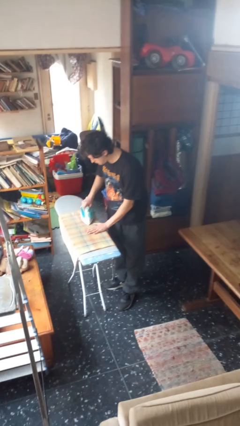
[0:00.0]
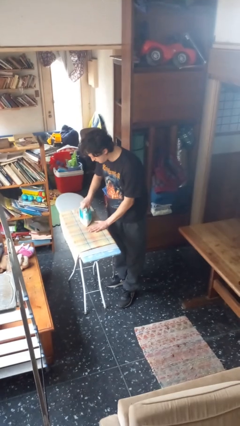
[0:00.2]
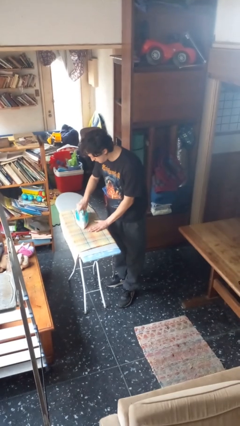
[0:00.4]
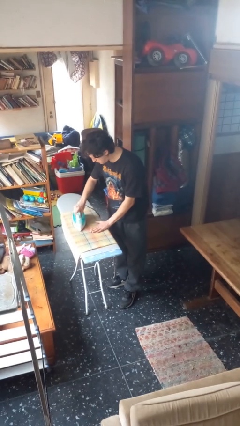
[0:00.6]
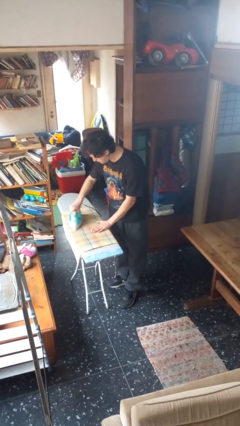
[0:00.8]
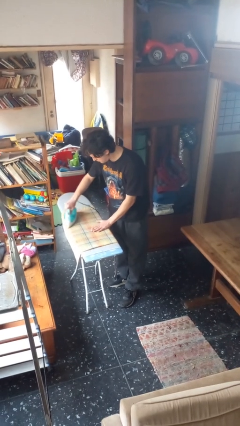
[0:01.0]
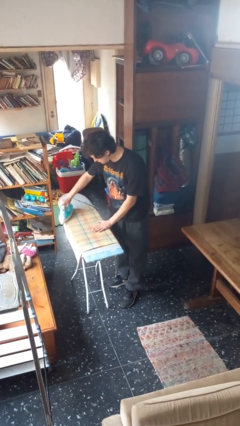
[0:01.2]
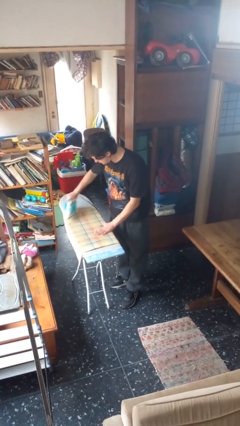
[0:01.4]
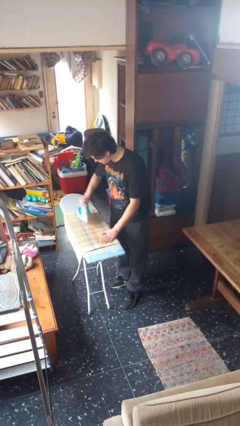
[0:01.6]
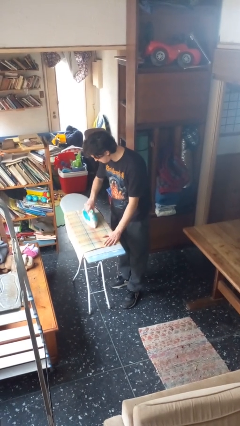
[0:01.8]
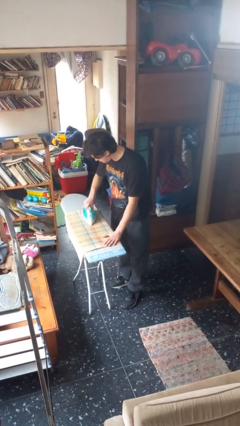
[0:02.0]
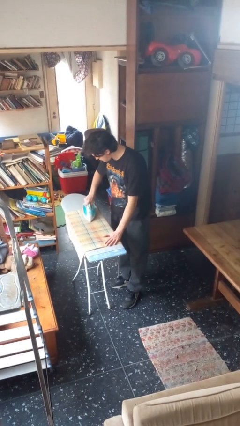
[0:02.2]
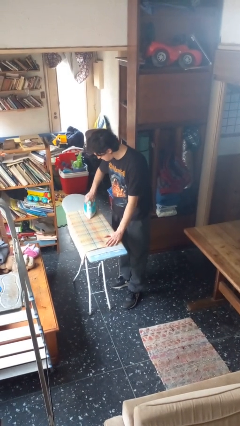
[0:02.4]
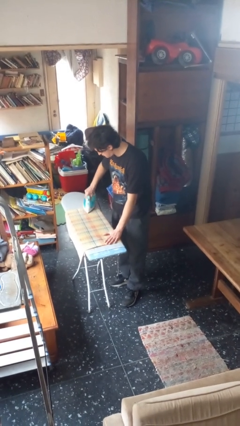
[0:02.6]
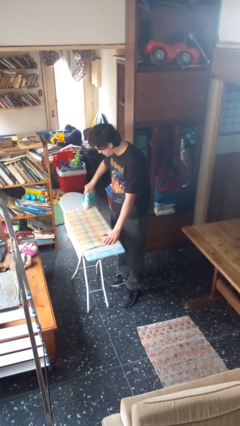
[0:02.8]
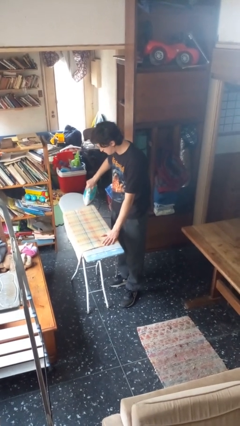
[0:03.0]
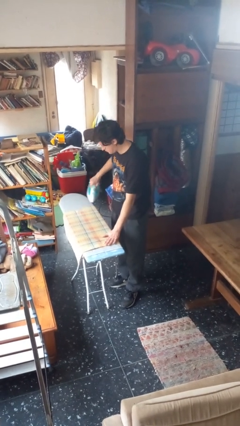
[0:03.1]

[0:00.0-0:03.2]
person irons clothes

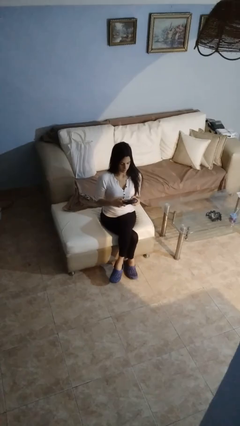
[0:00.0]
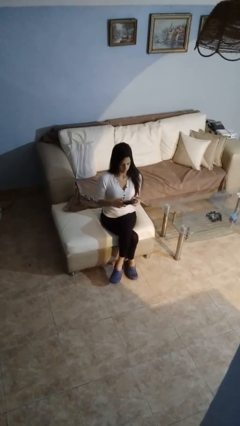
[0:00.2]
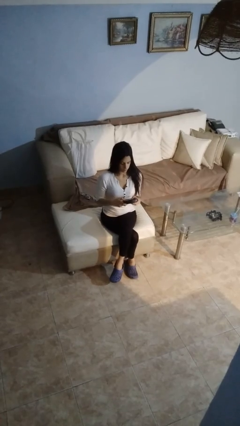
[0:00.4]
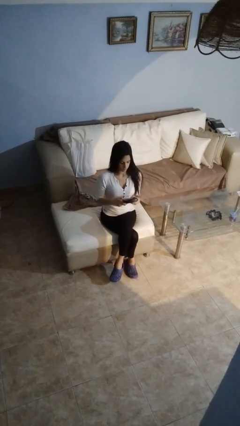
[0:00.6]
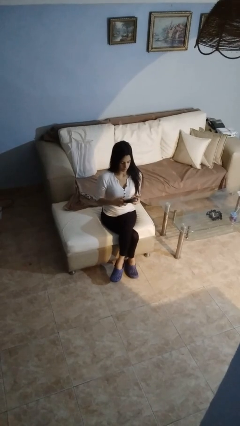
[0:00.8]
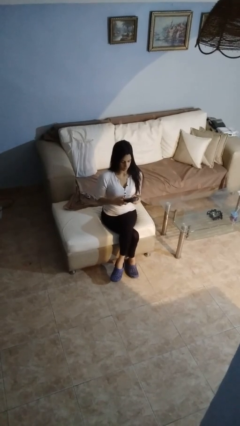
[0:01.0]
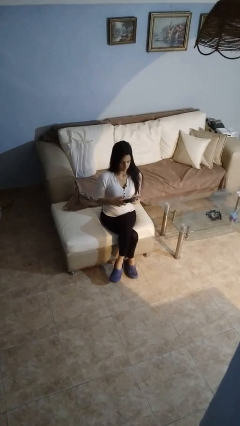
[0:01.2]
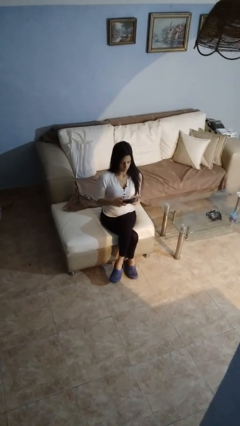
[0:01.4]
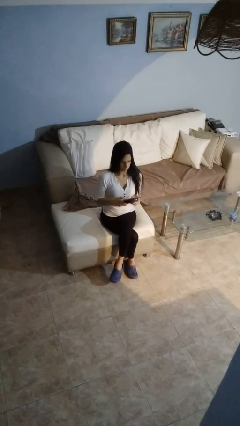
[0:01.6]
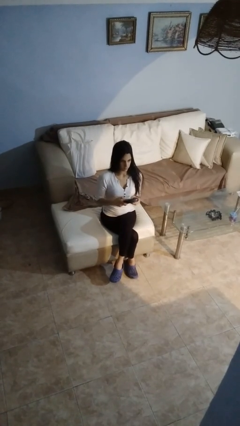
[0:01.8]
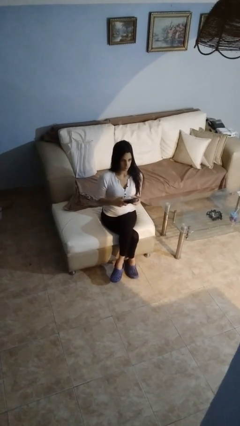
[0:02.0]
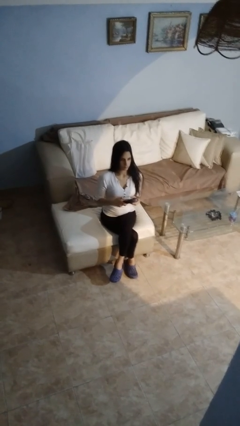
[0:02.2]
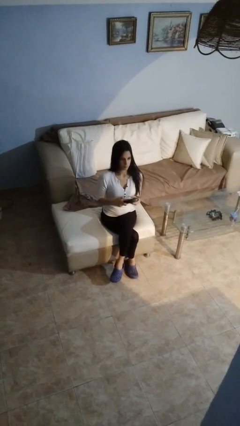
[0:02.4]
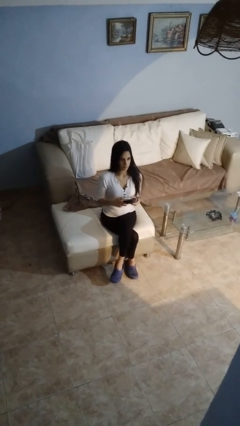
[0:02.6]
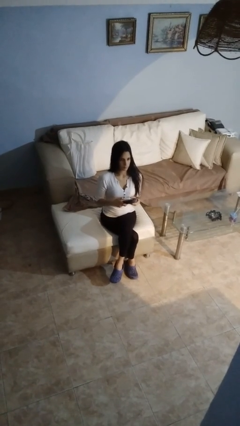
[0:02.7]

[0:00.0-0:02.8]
person interacts with handheld game

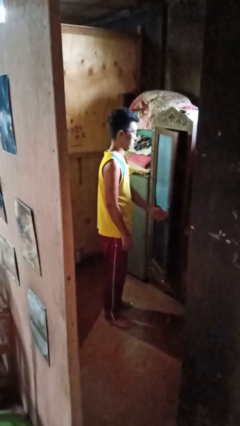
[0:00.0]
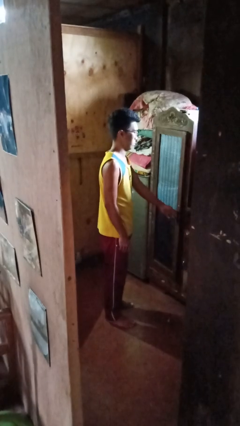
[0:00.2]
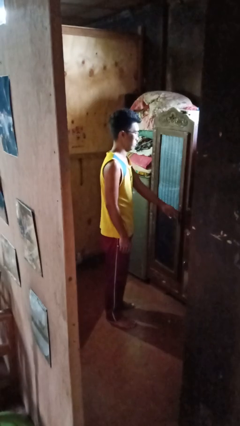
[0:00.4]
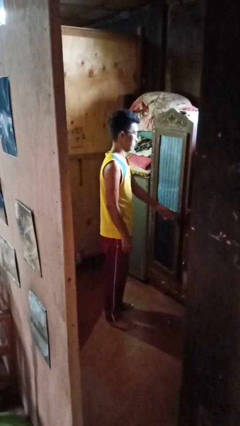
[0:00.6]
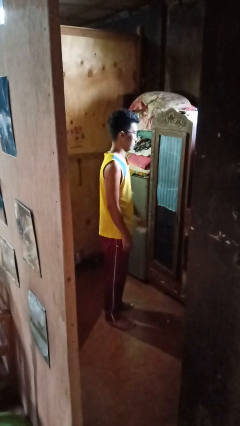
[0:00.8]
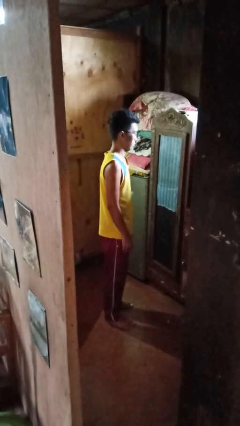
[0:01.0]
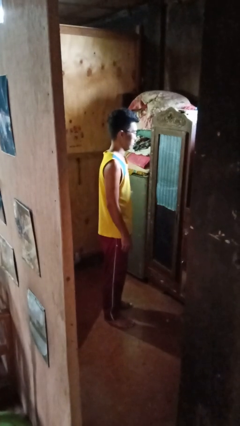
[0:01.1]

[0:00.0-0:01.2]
person closes closet door

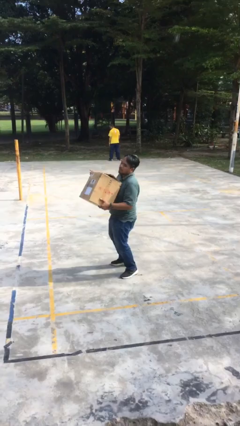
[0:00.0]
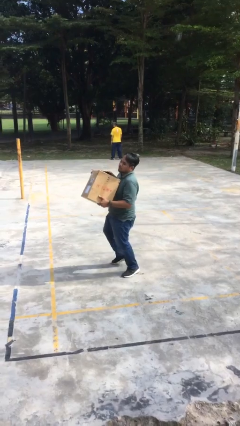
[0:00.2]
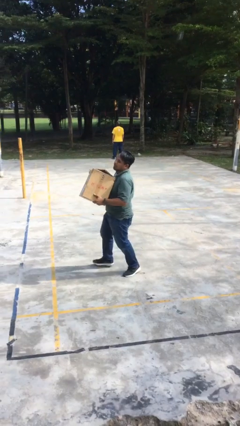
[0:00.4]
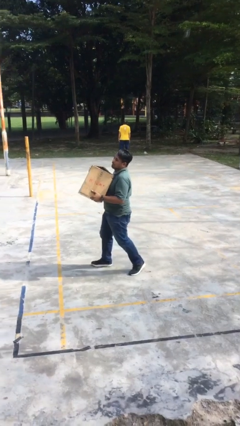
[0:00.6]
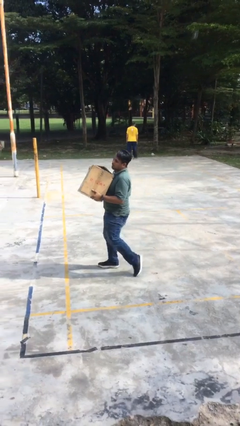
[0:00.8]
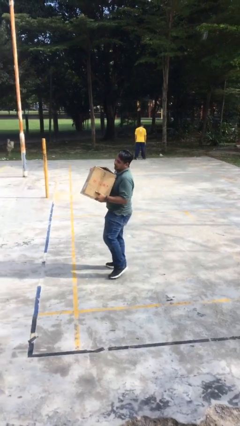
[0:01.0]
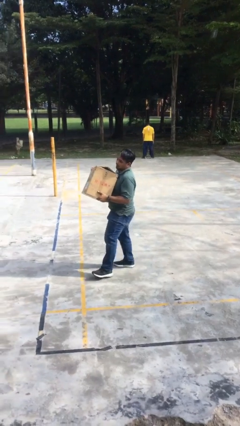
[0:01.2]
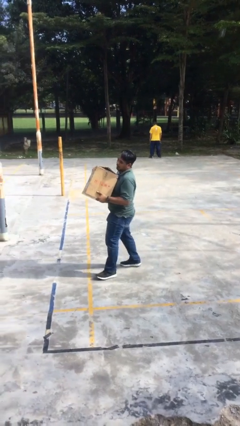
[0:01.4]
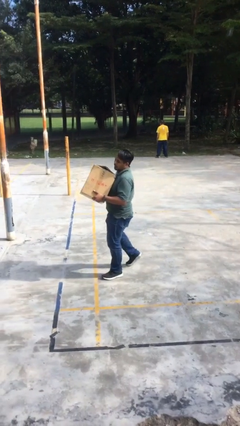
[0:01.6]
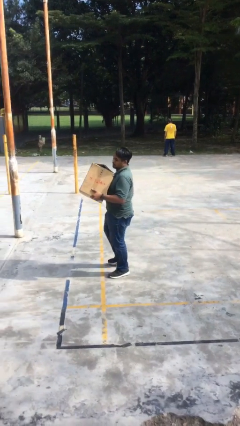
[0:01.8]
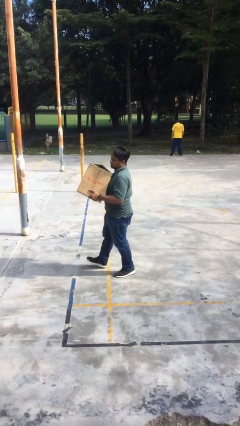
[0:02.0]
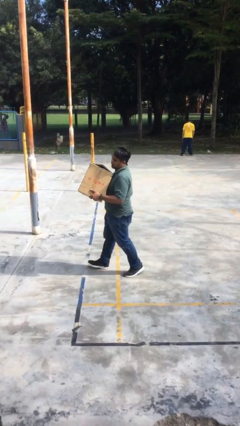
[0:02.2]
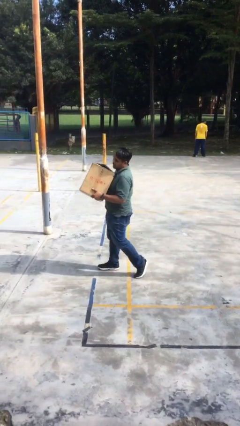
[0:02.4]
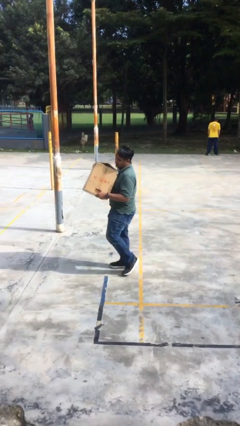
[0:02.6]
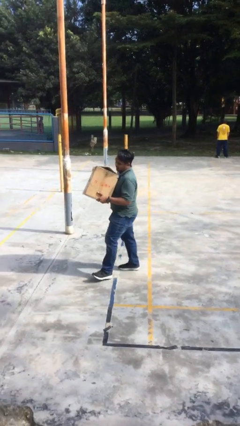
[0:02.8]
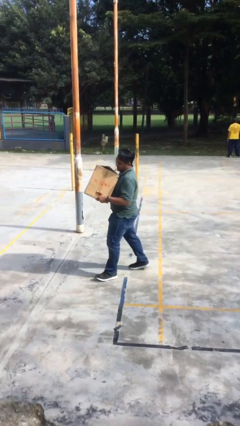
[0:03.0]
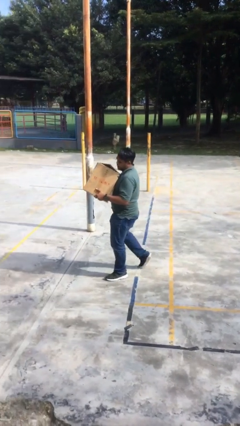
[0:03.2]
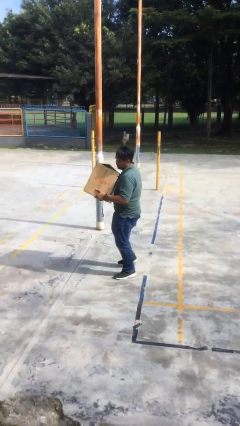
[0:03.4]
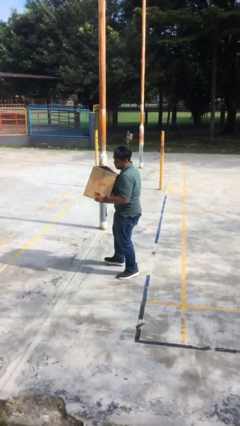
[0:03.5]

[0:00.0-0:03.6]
person carries heavy object

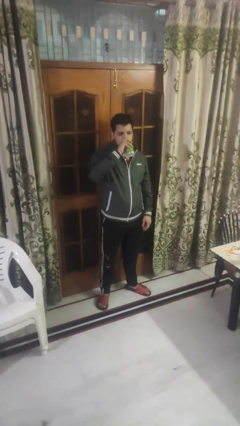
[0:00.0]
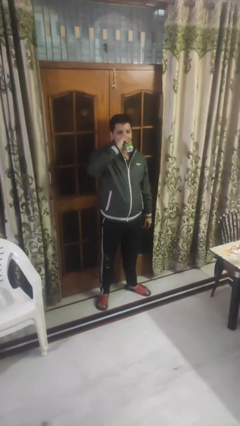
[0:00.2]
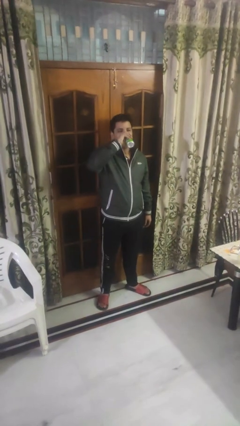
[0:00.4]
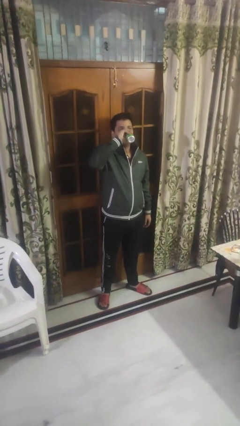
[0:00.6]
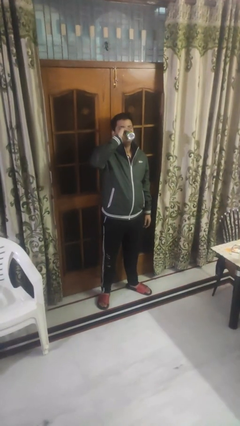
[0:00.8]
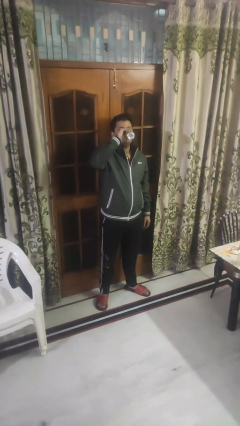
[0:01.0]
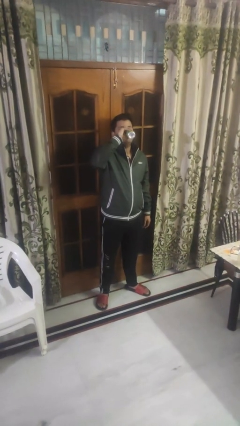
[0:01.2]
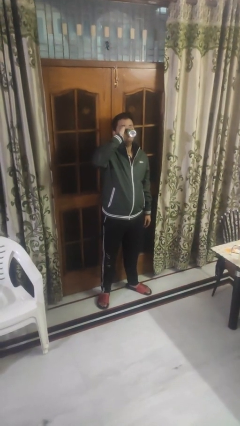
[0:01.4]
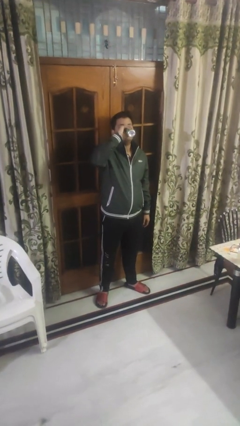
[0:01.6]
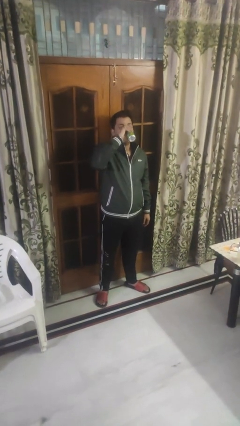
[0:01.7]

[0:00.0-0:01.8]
person drinks from beverage can

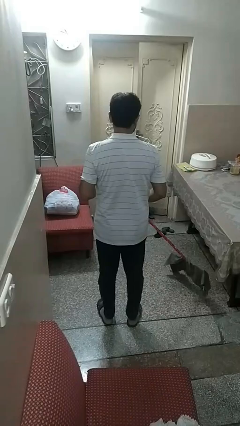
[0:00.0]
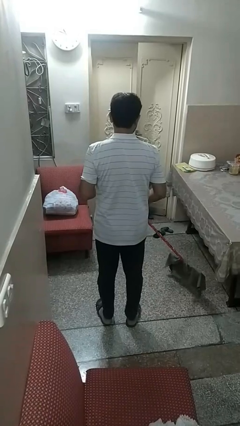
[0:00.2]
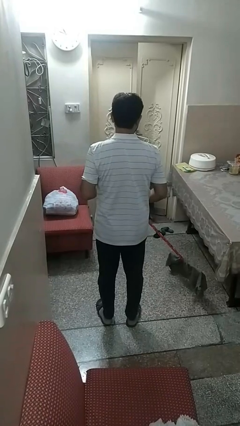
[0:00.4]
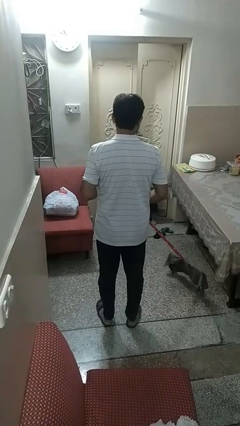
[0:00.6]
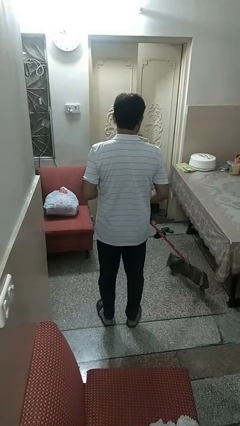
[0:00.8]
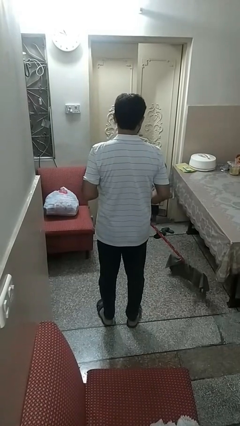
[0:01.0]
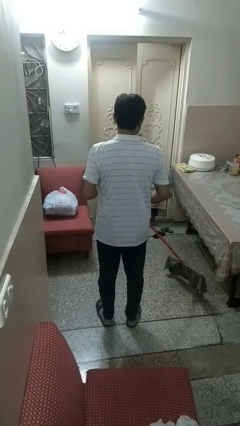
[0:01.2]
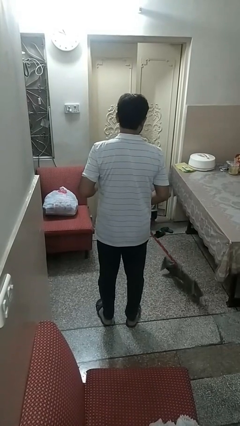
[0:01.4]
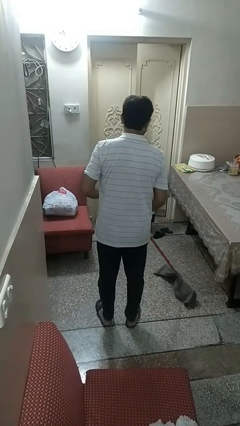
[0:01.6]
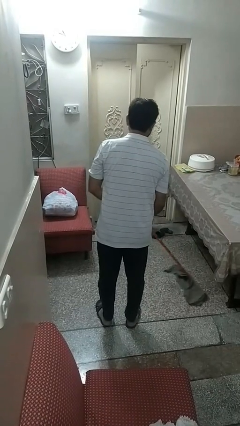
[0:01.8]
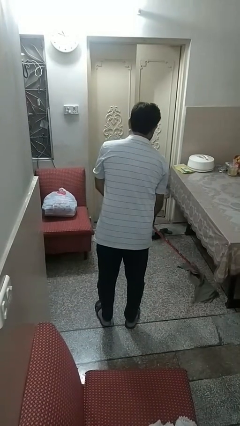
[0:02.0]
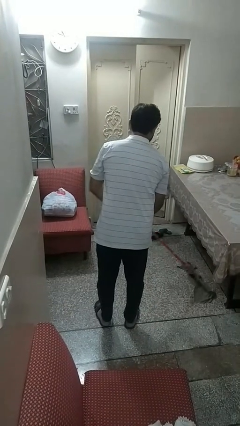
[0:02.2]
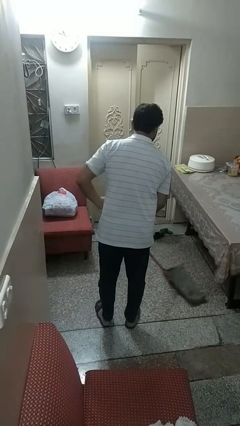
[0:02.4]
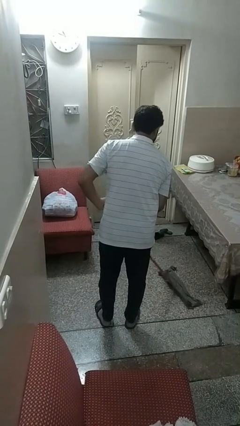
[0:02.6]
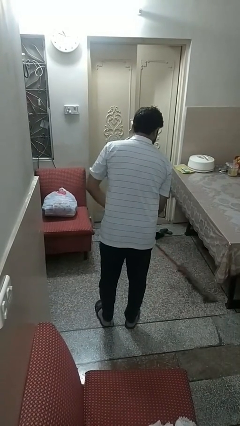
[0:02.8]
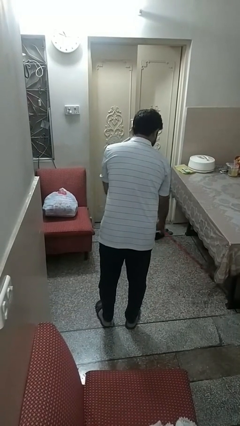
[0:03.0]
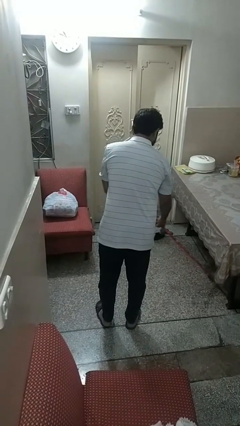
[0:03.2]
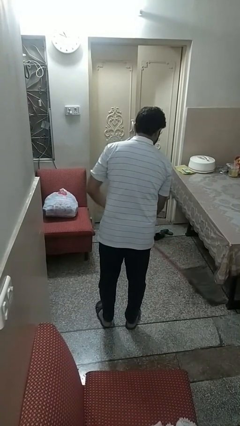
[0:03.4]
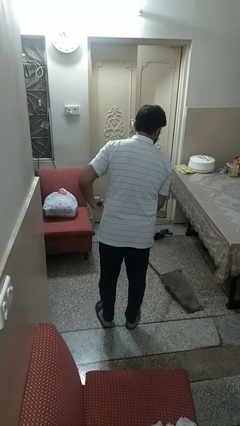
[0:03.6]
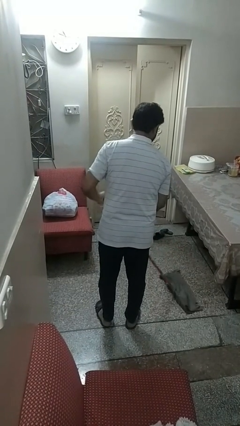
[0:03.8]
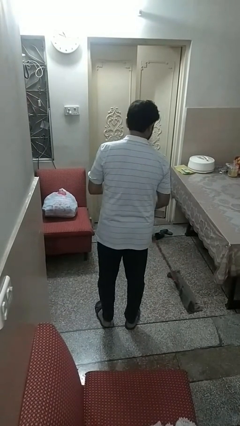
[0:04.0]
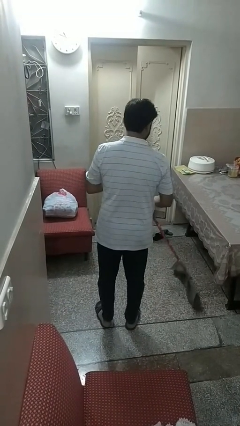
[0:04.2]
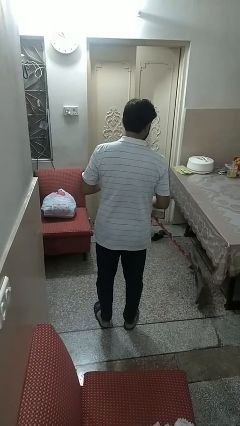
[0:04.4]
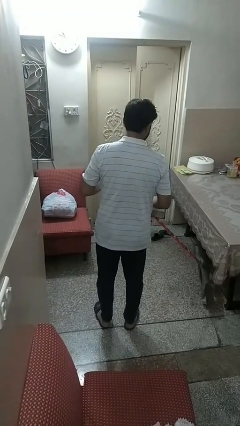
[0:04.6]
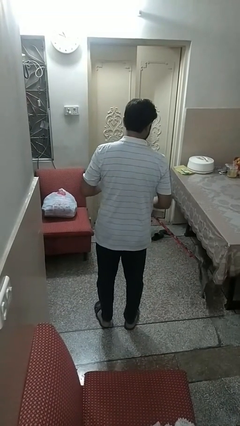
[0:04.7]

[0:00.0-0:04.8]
person mops
